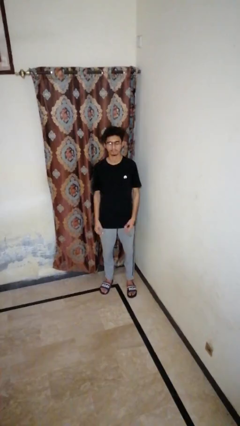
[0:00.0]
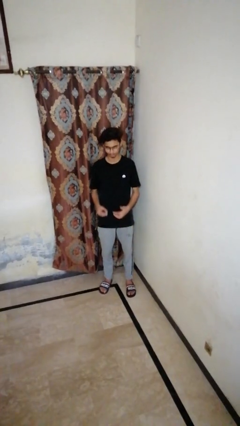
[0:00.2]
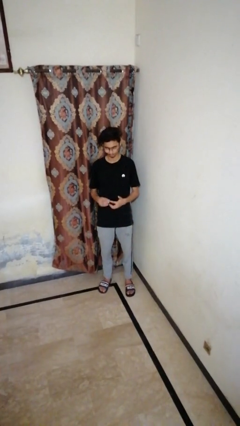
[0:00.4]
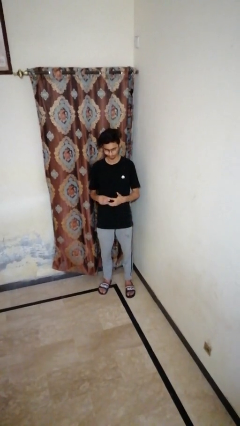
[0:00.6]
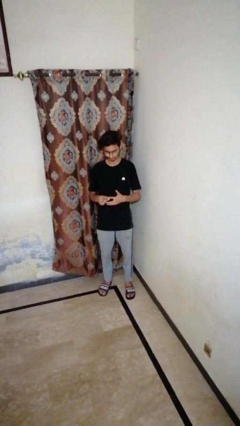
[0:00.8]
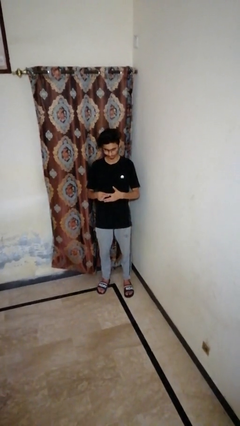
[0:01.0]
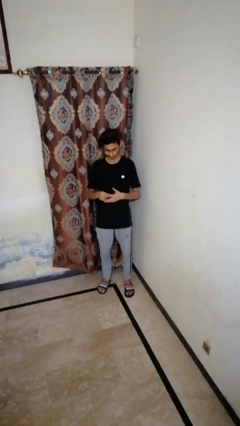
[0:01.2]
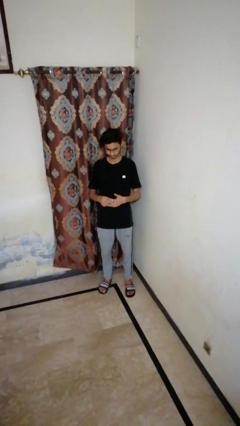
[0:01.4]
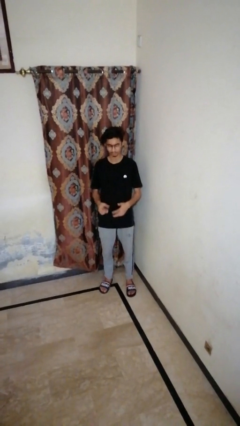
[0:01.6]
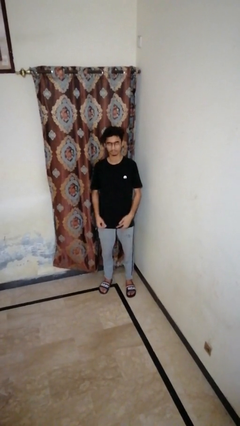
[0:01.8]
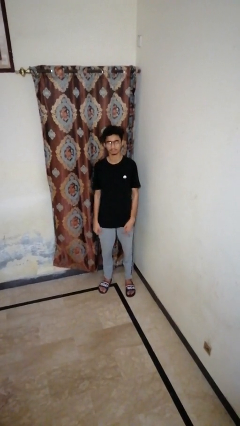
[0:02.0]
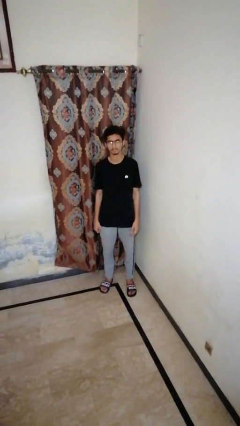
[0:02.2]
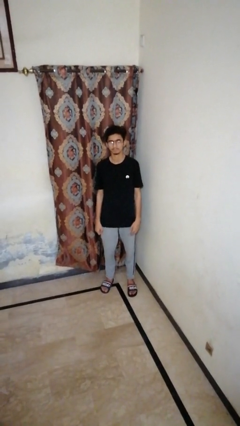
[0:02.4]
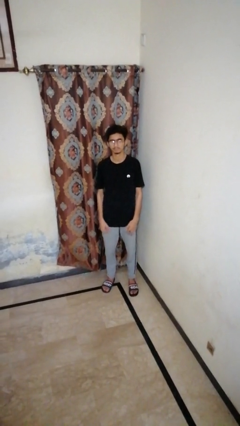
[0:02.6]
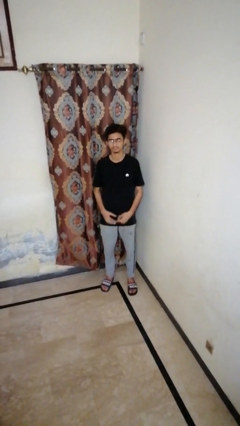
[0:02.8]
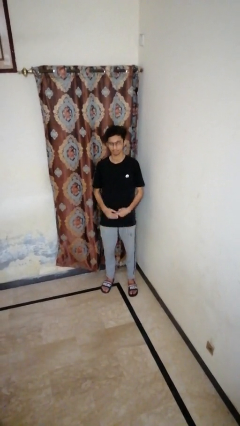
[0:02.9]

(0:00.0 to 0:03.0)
person puts on ring

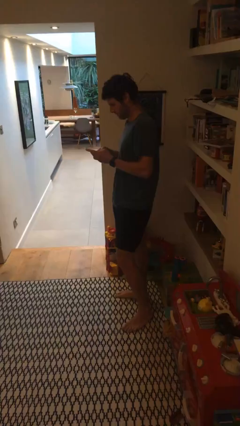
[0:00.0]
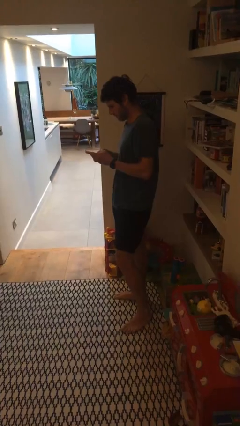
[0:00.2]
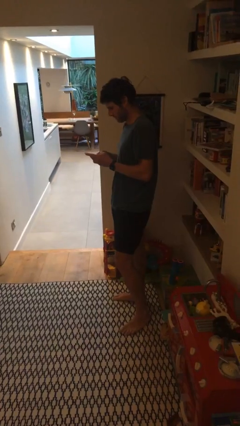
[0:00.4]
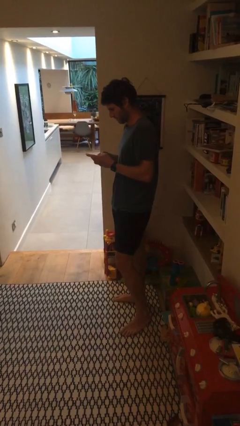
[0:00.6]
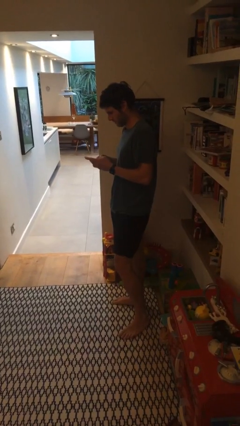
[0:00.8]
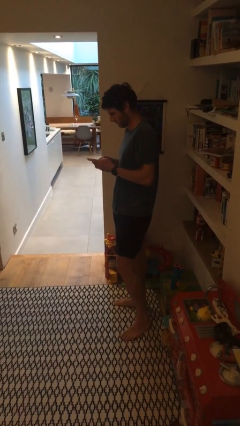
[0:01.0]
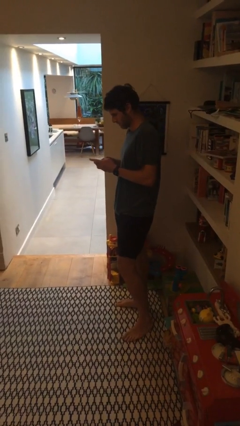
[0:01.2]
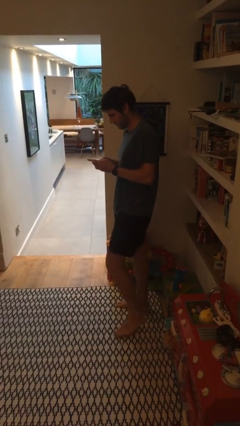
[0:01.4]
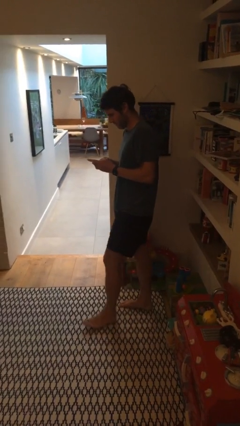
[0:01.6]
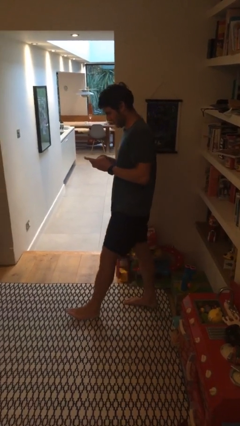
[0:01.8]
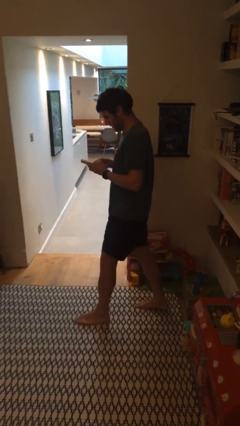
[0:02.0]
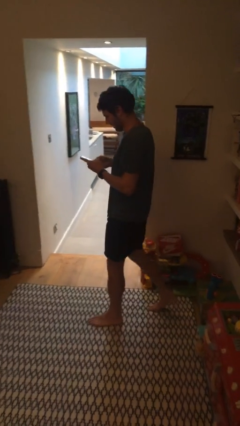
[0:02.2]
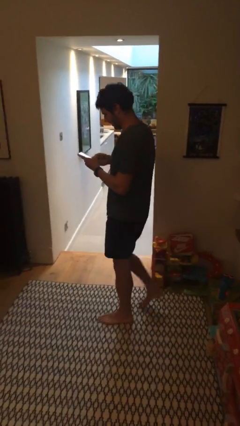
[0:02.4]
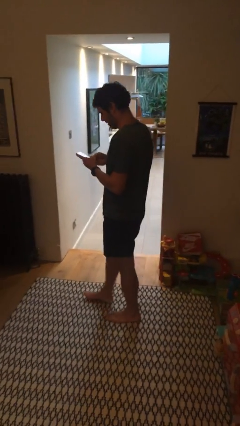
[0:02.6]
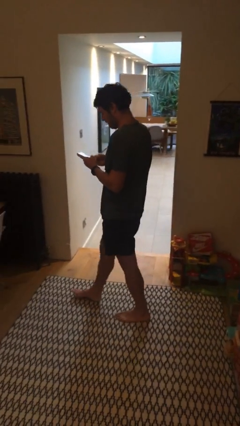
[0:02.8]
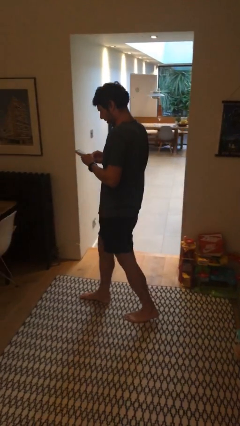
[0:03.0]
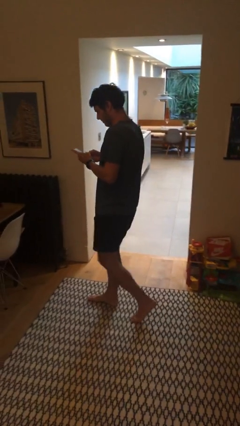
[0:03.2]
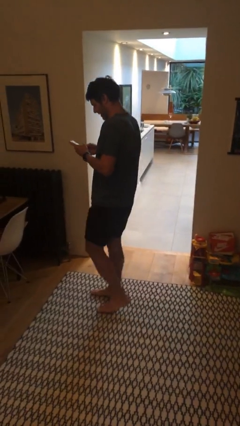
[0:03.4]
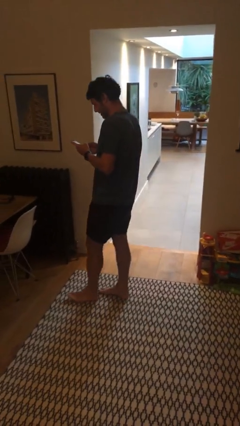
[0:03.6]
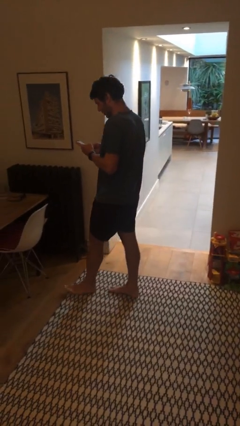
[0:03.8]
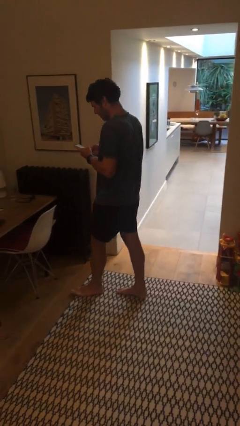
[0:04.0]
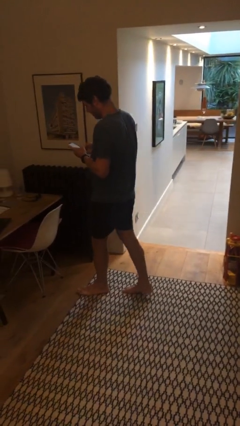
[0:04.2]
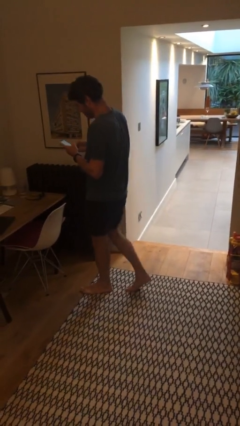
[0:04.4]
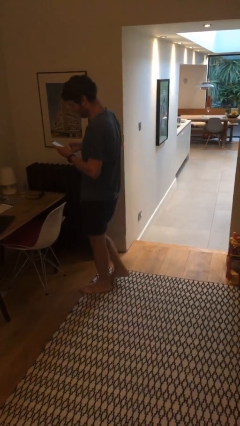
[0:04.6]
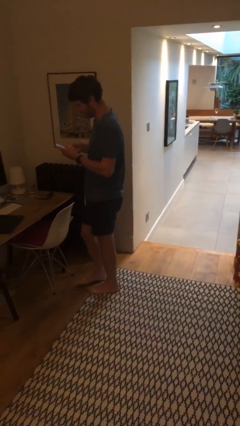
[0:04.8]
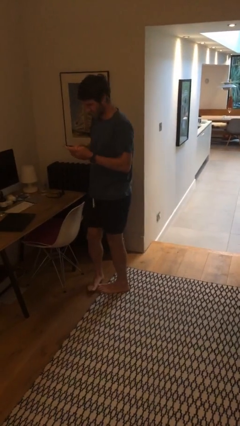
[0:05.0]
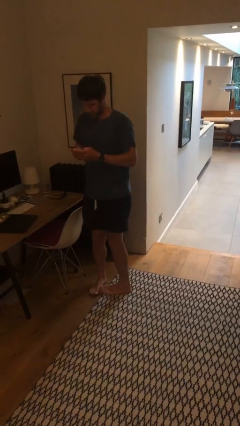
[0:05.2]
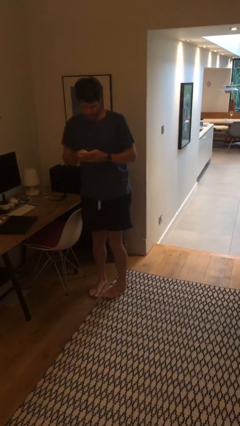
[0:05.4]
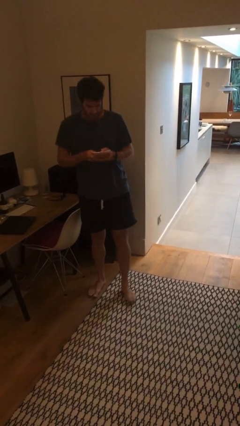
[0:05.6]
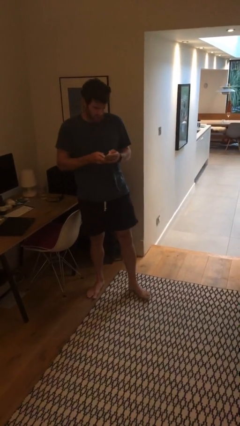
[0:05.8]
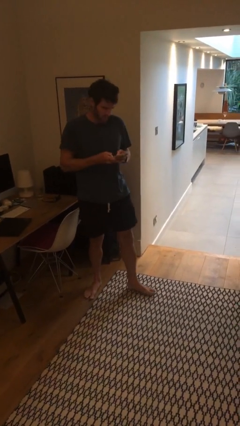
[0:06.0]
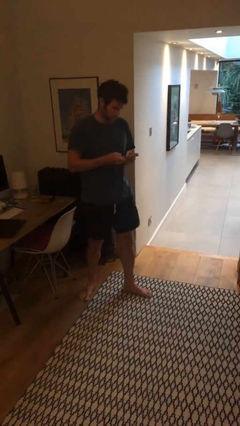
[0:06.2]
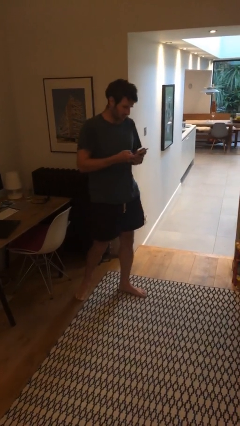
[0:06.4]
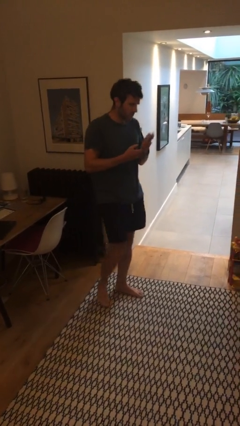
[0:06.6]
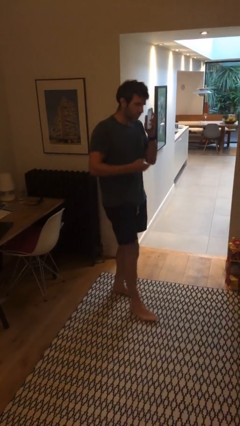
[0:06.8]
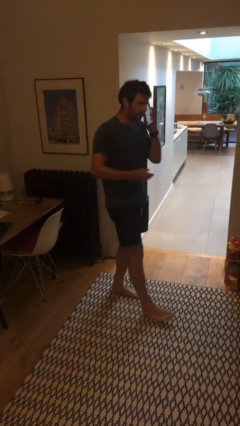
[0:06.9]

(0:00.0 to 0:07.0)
person texts on phone

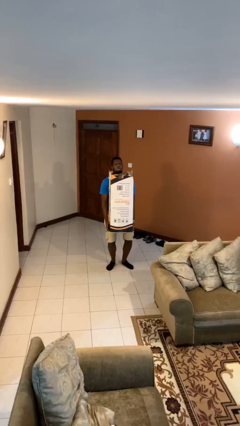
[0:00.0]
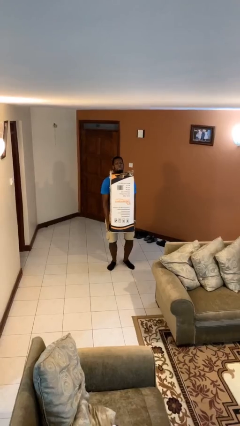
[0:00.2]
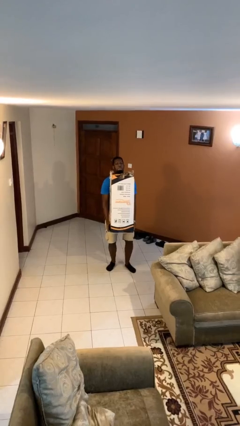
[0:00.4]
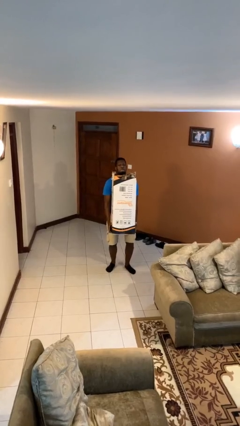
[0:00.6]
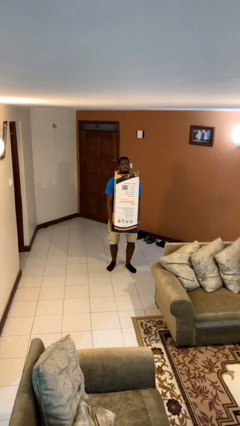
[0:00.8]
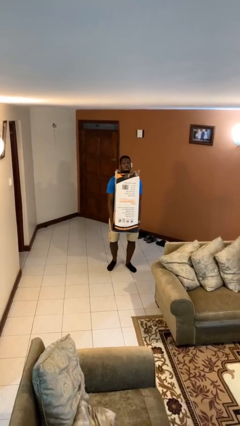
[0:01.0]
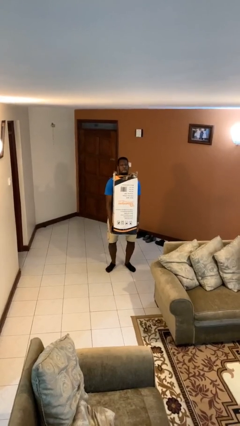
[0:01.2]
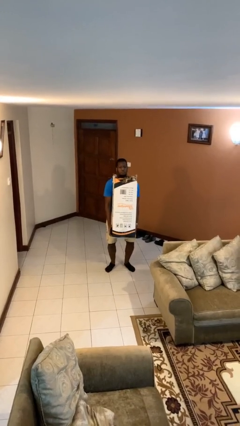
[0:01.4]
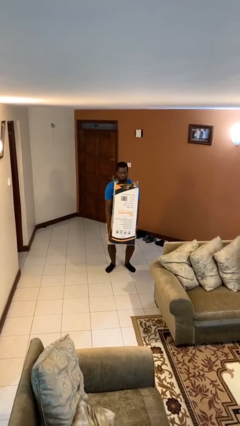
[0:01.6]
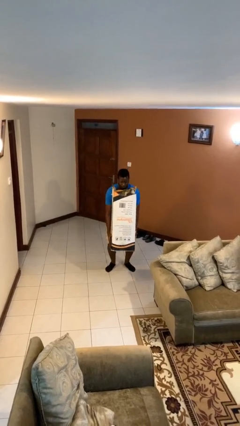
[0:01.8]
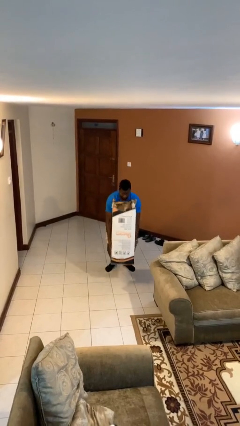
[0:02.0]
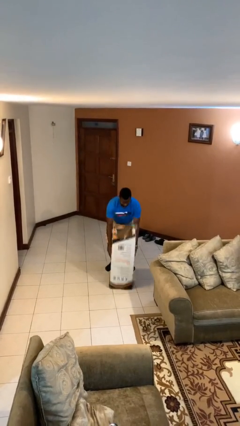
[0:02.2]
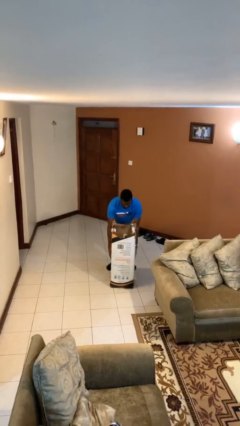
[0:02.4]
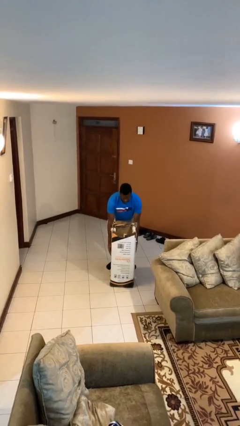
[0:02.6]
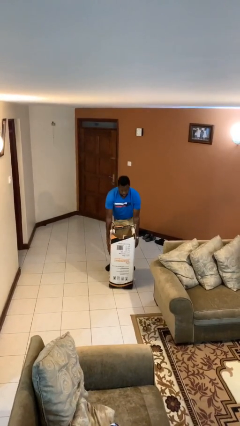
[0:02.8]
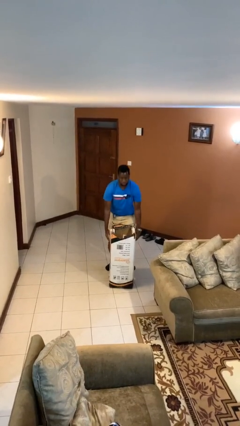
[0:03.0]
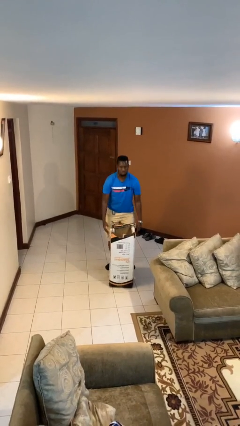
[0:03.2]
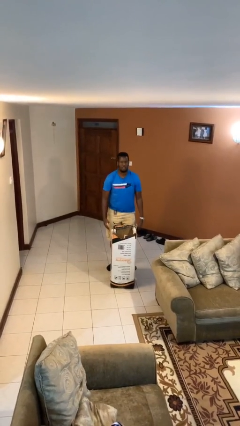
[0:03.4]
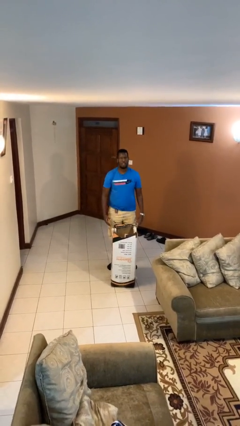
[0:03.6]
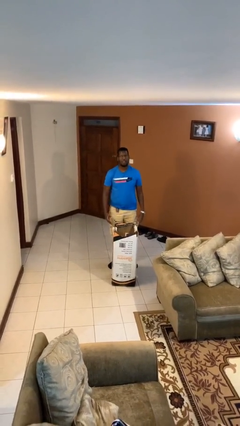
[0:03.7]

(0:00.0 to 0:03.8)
person puts down object on floor

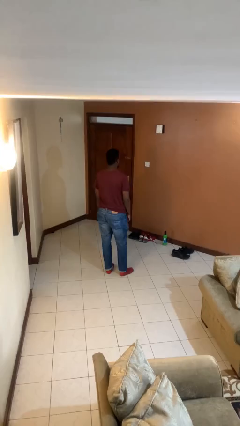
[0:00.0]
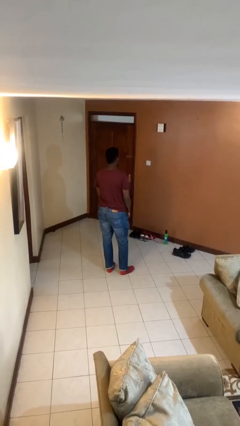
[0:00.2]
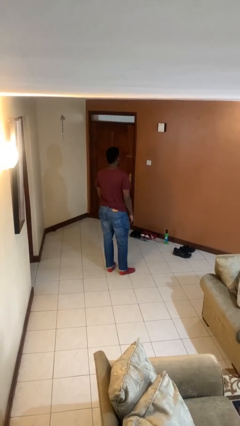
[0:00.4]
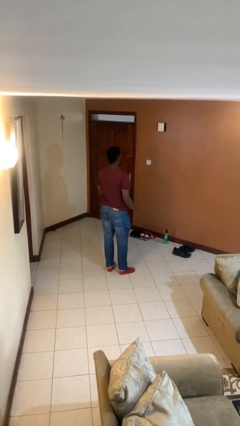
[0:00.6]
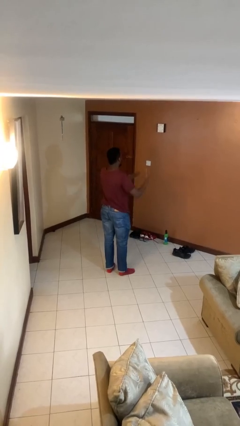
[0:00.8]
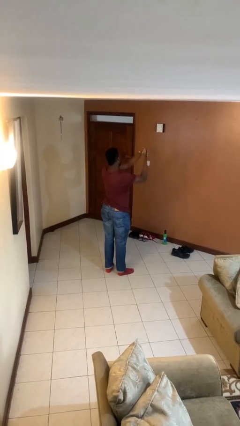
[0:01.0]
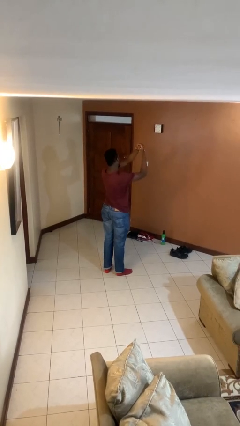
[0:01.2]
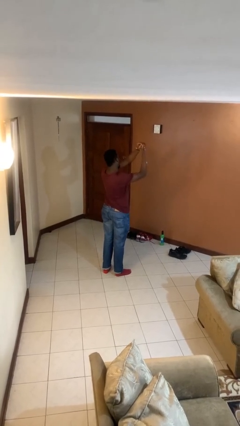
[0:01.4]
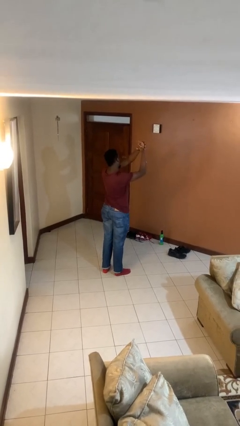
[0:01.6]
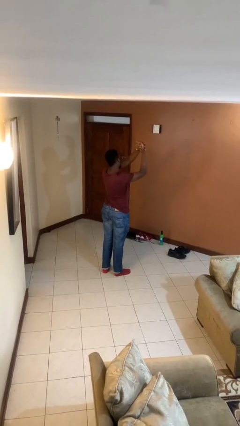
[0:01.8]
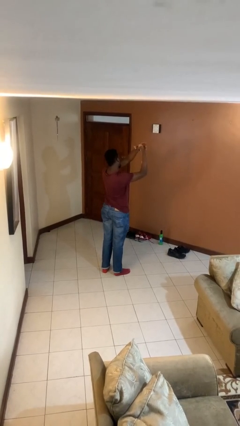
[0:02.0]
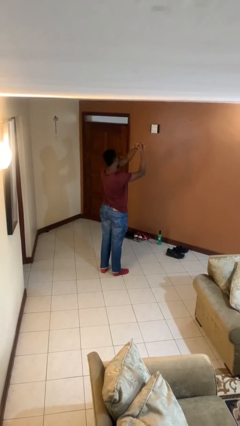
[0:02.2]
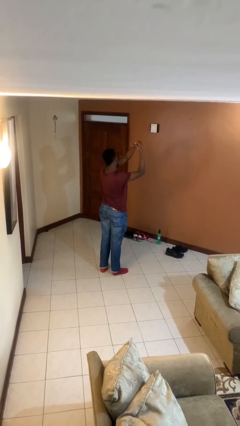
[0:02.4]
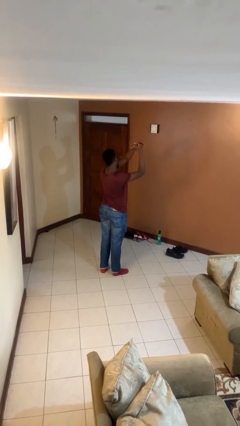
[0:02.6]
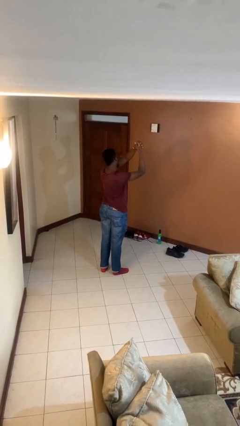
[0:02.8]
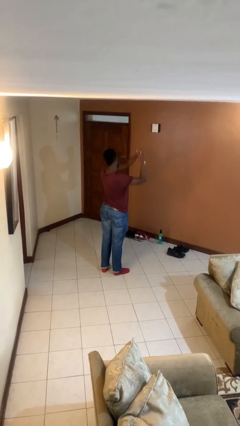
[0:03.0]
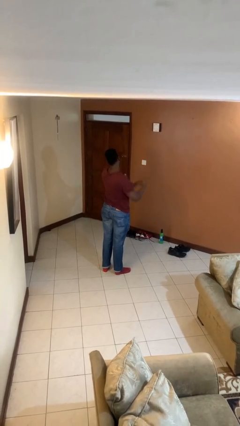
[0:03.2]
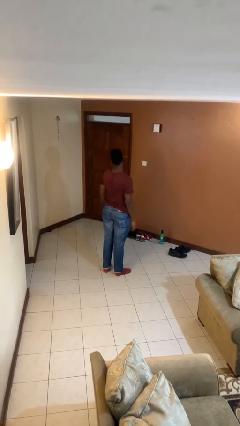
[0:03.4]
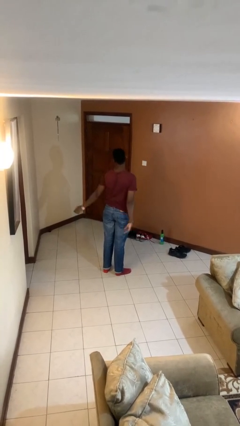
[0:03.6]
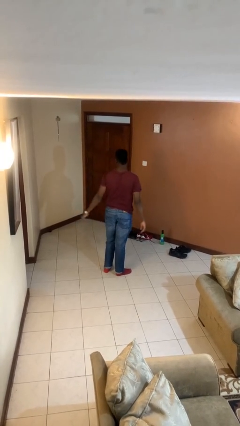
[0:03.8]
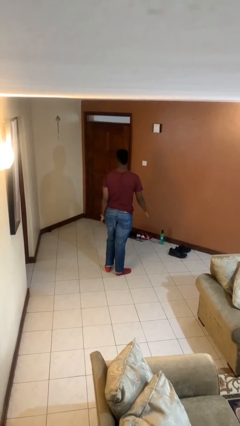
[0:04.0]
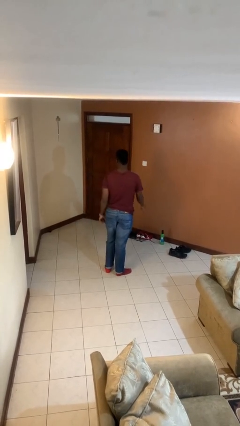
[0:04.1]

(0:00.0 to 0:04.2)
person cracks knuckles
